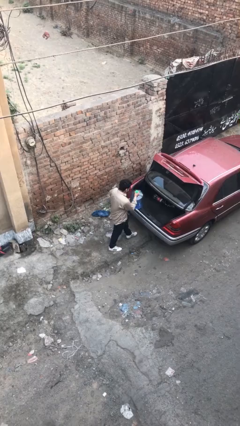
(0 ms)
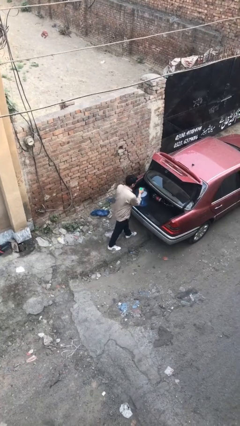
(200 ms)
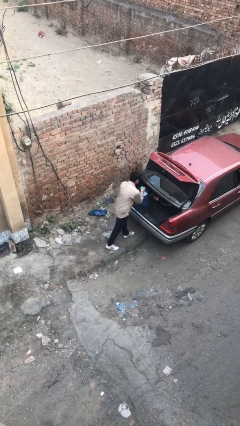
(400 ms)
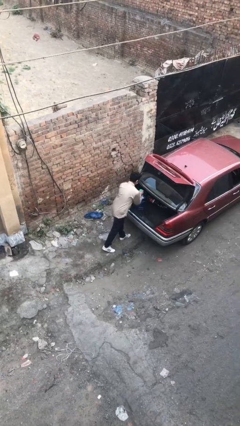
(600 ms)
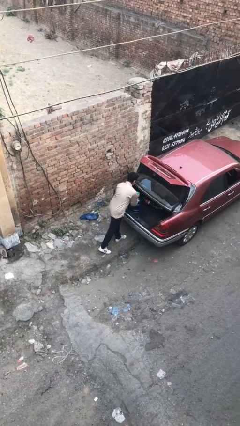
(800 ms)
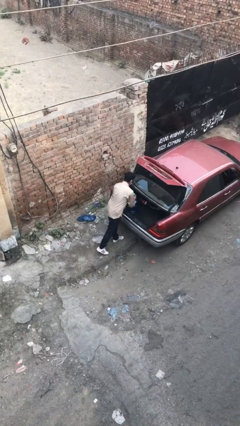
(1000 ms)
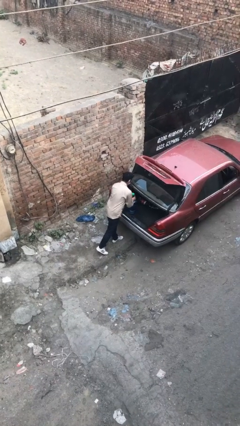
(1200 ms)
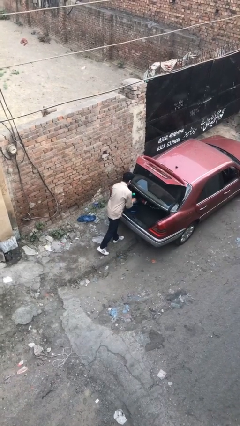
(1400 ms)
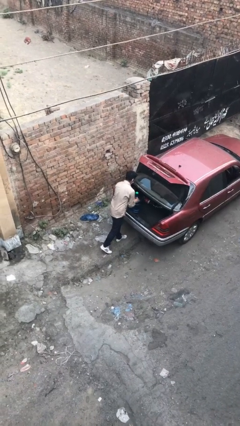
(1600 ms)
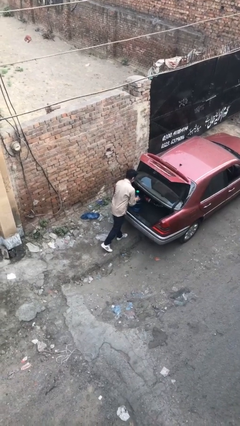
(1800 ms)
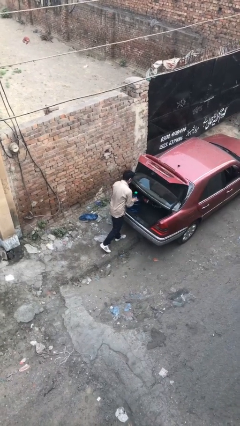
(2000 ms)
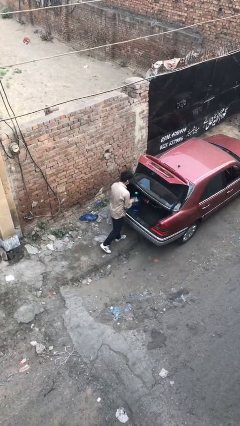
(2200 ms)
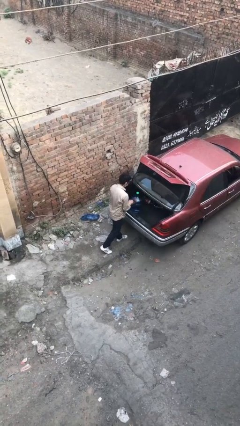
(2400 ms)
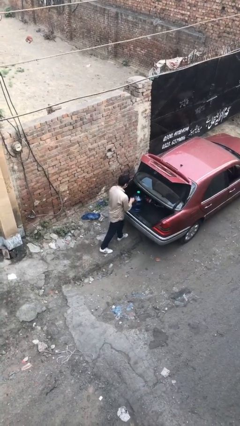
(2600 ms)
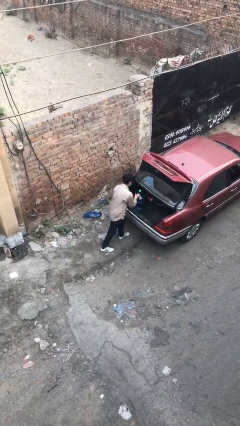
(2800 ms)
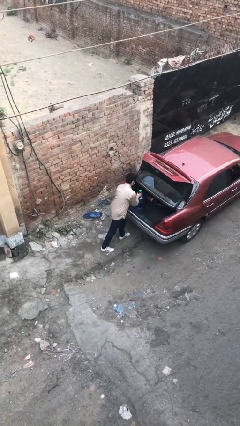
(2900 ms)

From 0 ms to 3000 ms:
person loads car

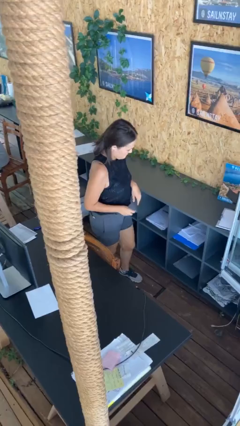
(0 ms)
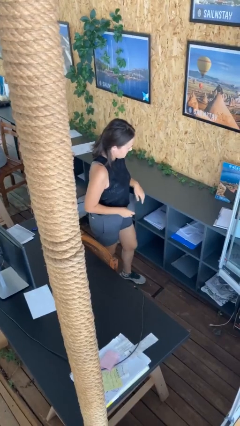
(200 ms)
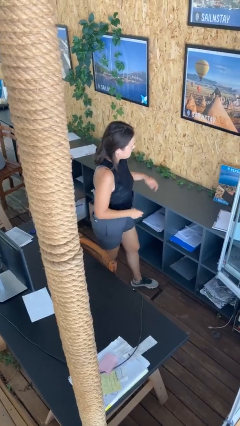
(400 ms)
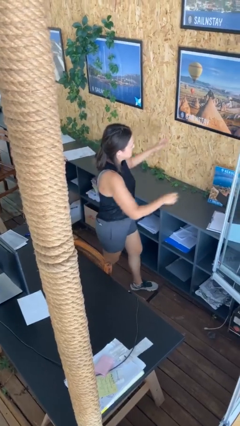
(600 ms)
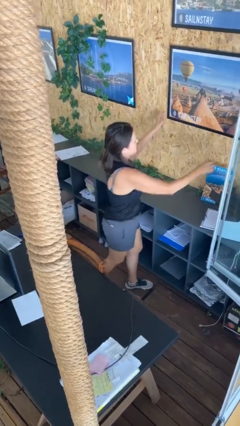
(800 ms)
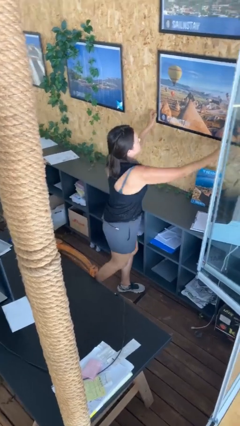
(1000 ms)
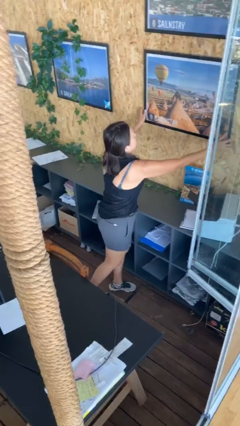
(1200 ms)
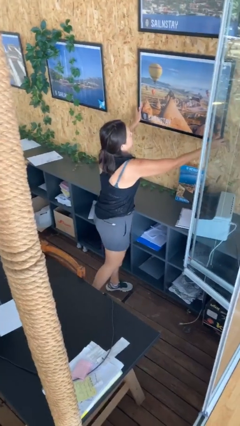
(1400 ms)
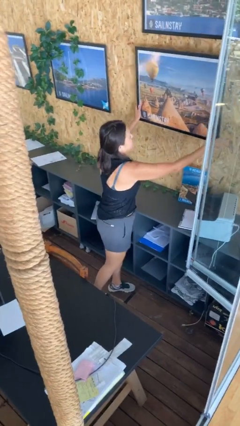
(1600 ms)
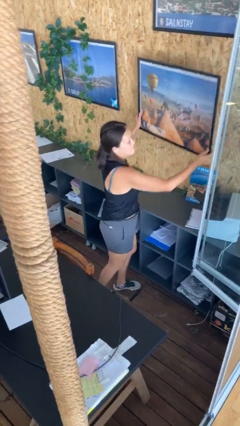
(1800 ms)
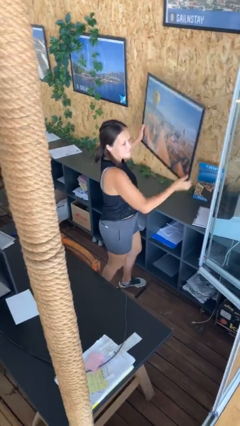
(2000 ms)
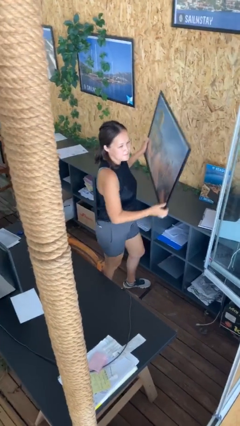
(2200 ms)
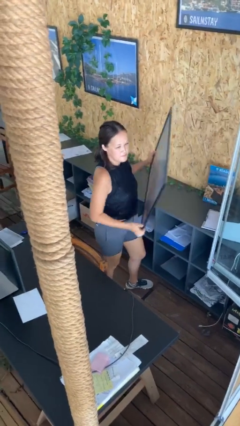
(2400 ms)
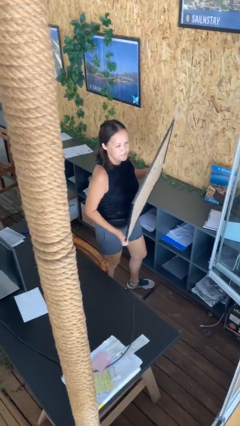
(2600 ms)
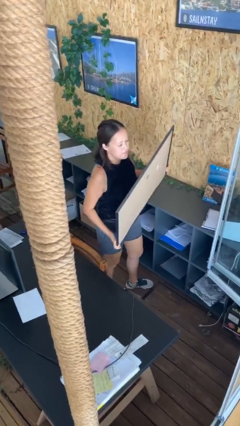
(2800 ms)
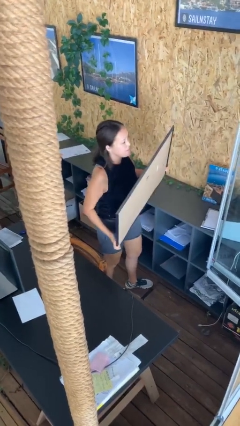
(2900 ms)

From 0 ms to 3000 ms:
person takes down picture frame

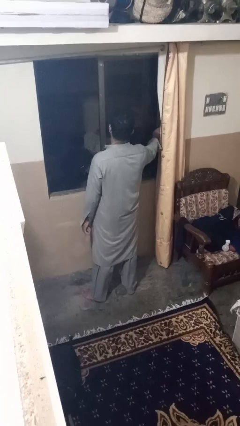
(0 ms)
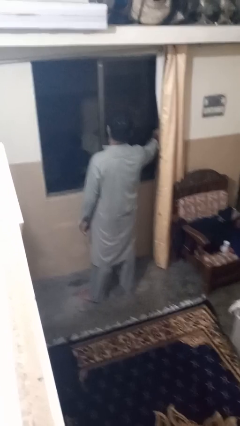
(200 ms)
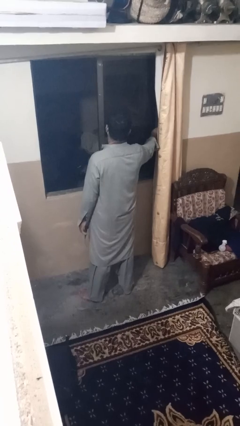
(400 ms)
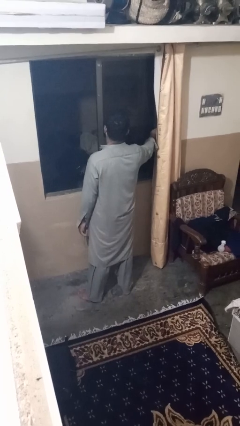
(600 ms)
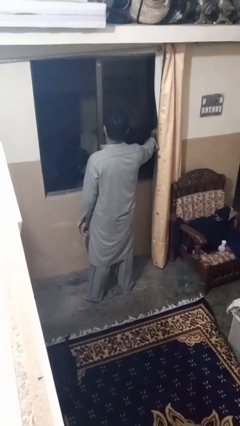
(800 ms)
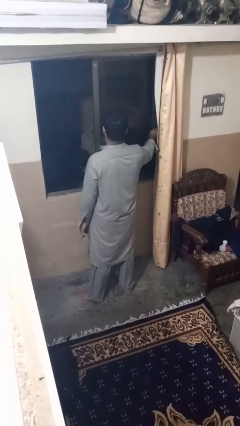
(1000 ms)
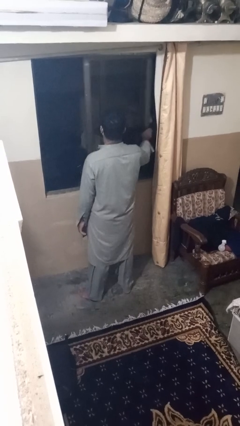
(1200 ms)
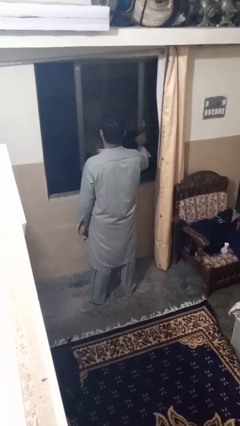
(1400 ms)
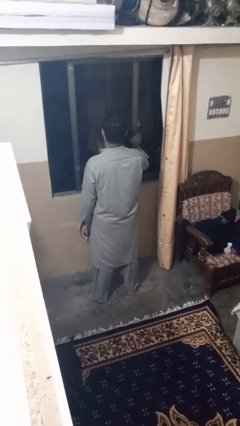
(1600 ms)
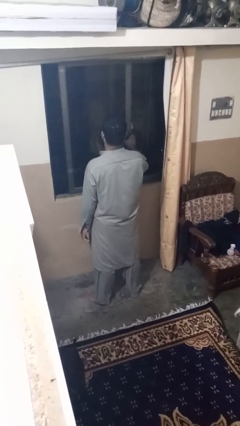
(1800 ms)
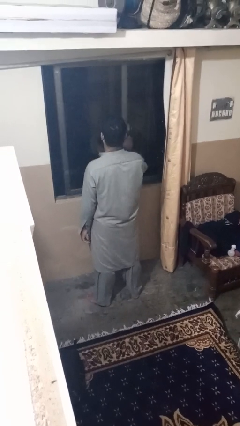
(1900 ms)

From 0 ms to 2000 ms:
person closes home window

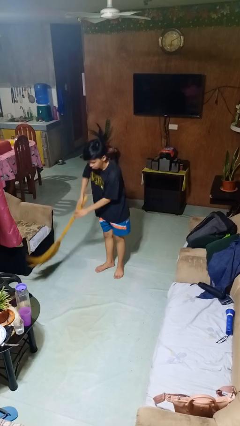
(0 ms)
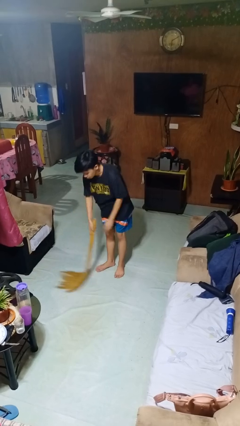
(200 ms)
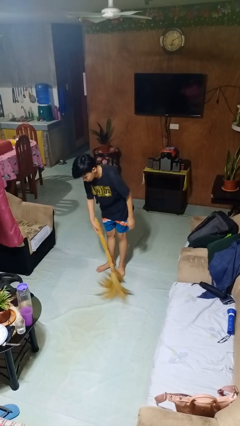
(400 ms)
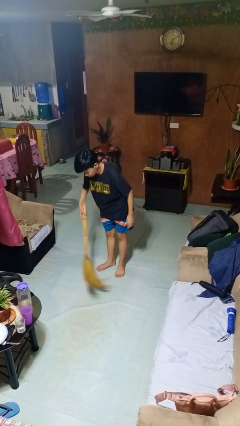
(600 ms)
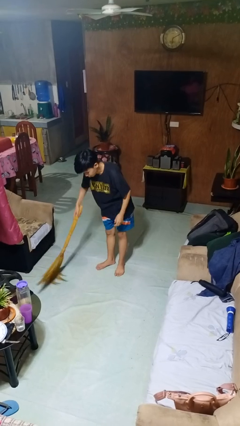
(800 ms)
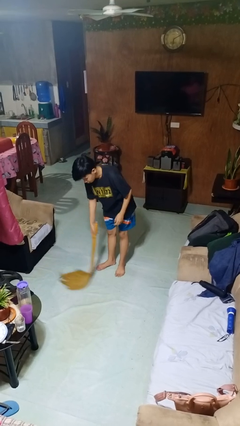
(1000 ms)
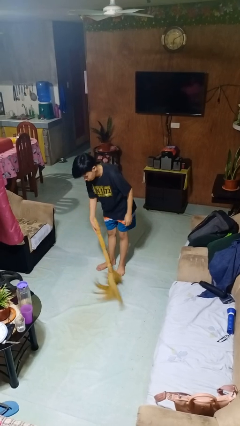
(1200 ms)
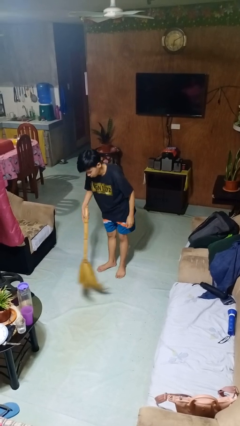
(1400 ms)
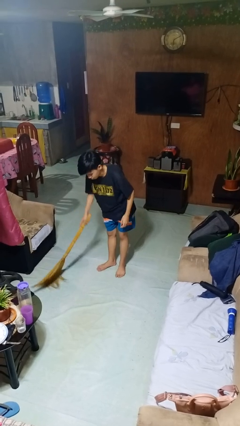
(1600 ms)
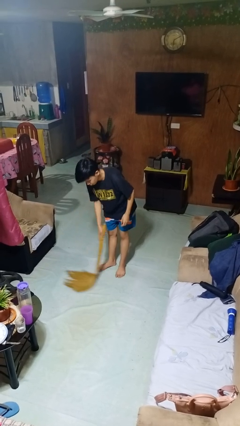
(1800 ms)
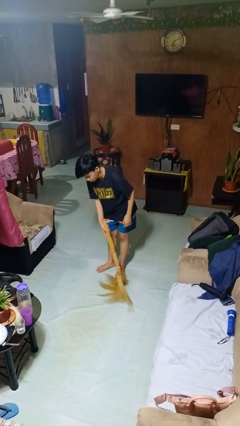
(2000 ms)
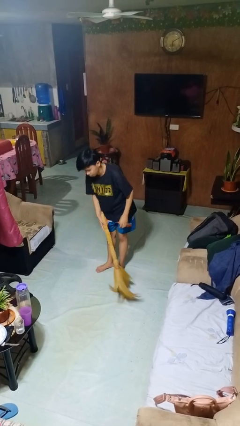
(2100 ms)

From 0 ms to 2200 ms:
person sweeps floor

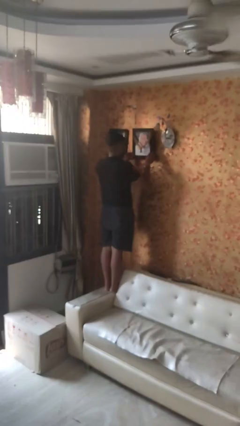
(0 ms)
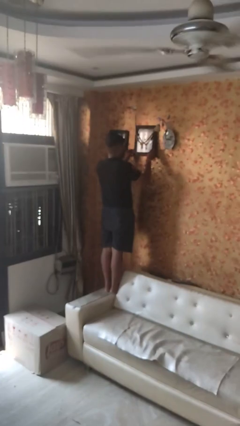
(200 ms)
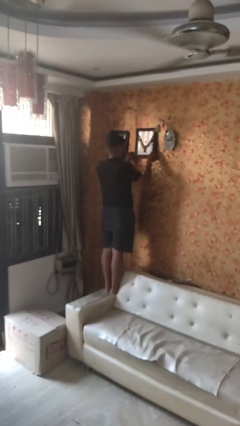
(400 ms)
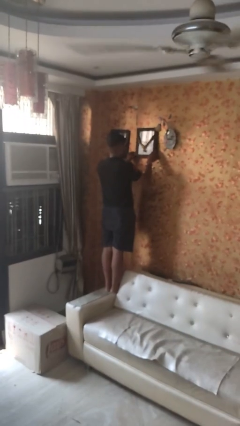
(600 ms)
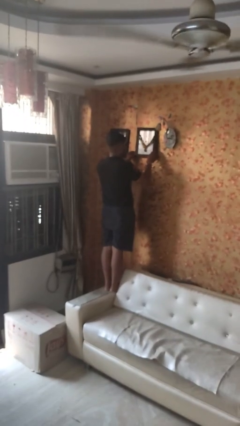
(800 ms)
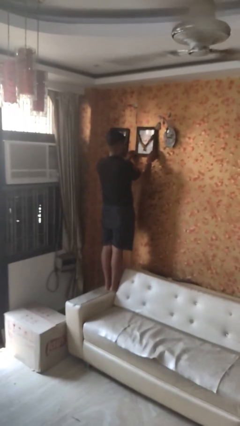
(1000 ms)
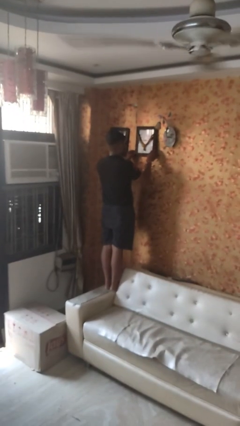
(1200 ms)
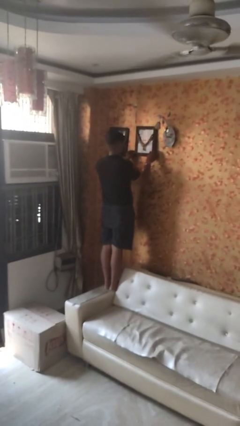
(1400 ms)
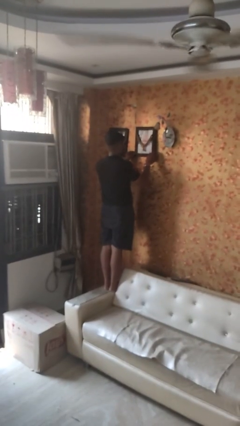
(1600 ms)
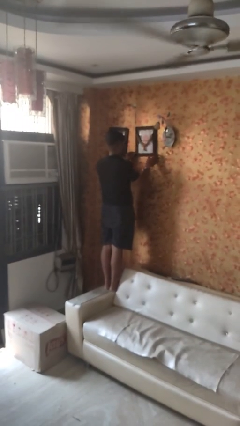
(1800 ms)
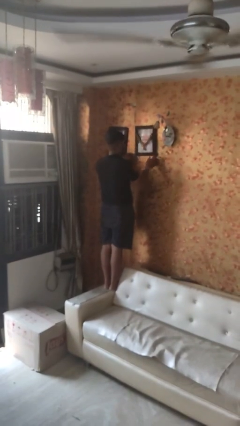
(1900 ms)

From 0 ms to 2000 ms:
person puts up picture frame

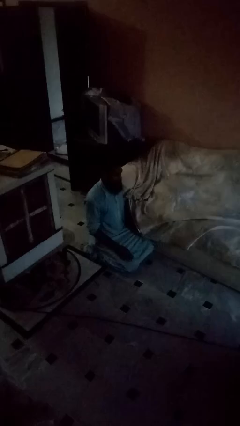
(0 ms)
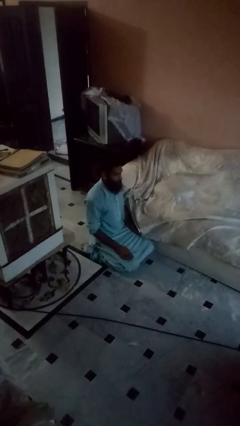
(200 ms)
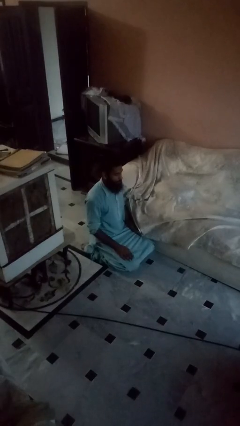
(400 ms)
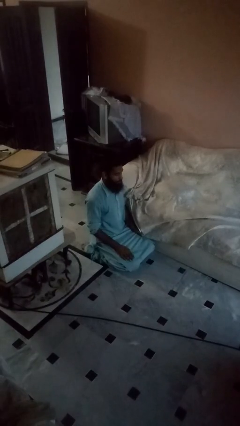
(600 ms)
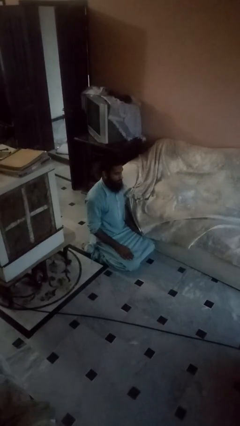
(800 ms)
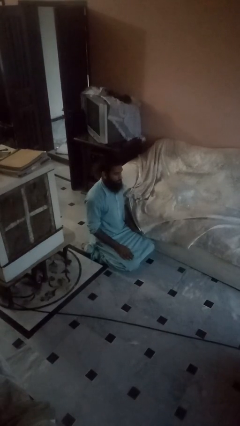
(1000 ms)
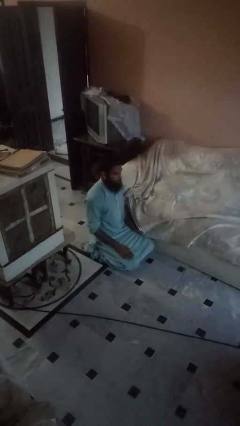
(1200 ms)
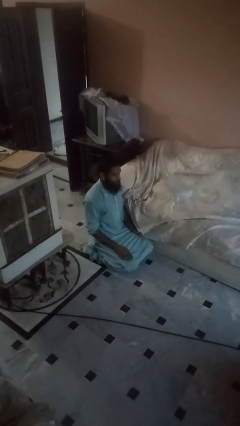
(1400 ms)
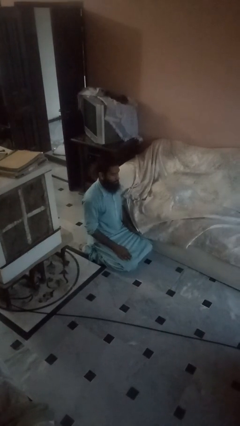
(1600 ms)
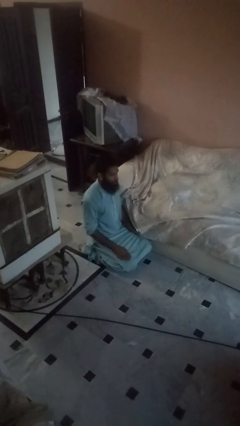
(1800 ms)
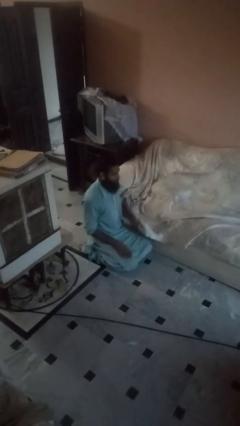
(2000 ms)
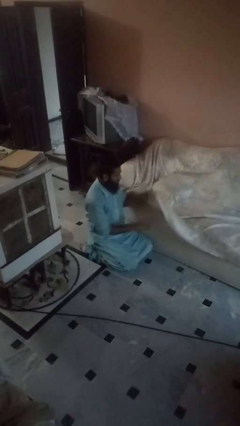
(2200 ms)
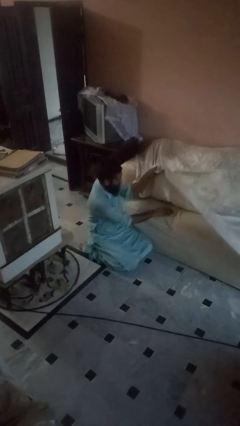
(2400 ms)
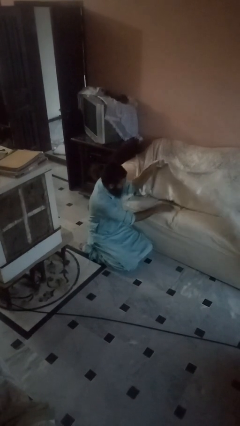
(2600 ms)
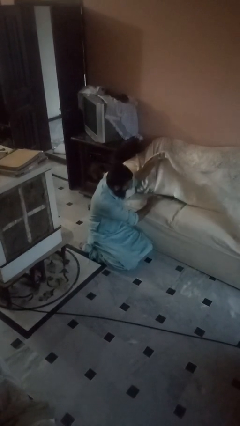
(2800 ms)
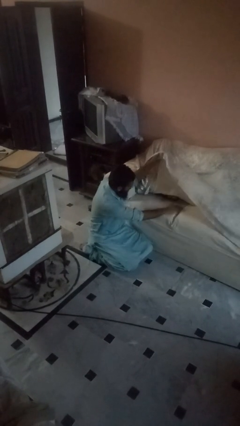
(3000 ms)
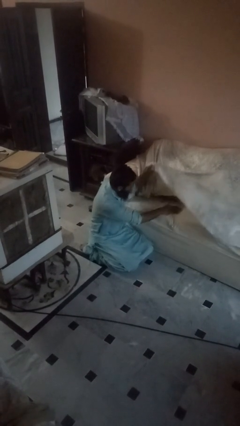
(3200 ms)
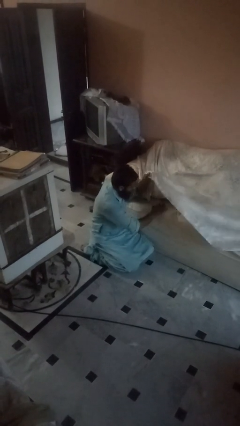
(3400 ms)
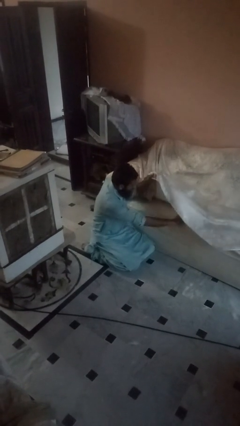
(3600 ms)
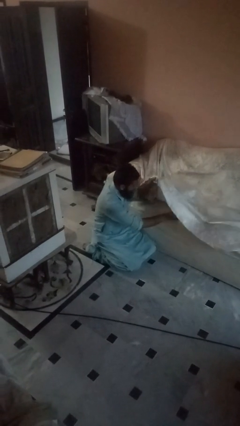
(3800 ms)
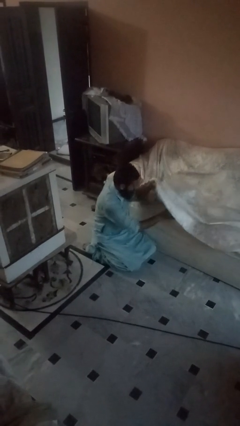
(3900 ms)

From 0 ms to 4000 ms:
person searches in couch

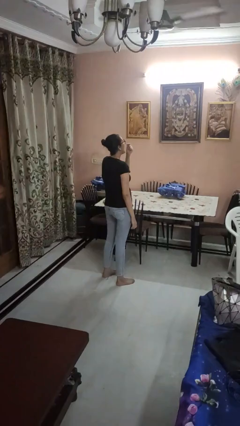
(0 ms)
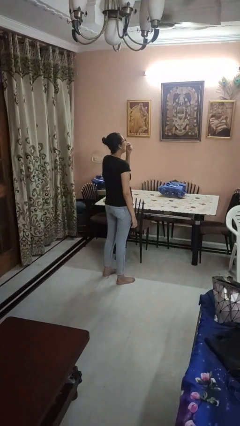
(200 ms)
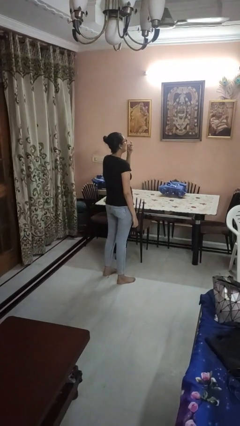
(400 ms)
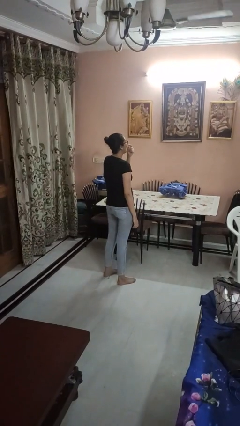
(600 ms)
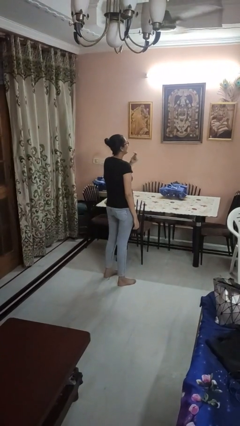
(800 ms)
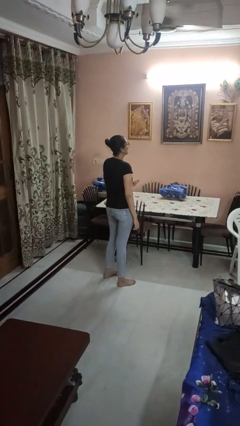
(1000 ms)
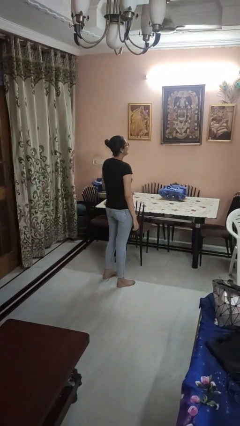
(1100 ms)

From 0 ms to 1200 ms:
person yawns

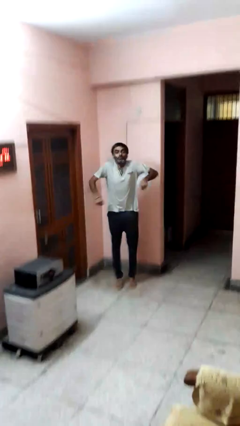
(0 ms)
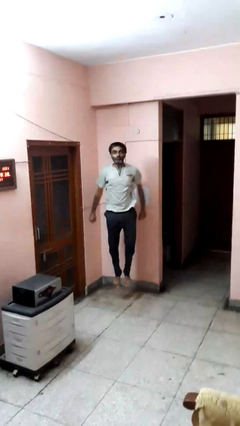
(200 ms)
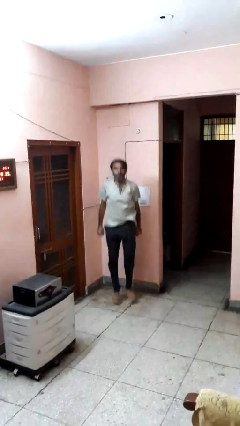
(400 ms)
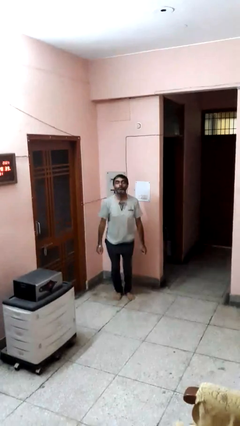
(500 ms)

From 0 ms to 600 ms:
person jumps
